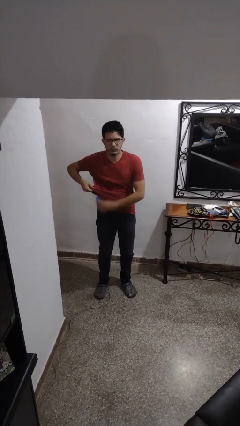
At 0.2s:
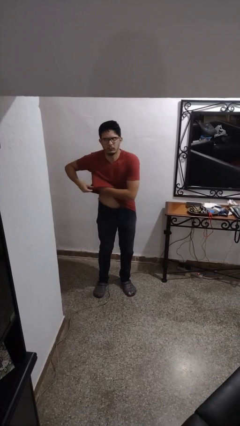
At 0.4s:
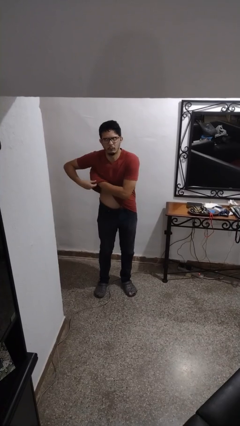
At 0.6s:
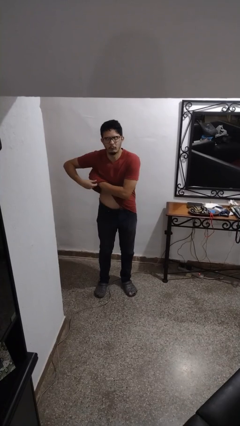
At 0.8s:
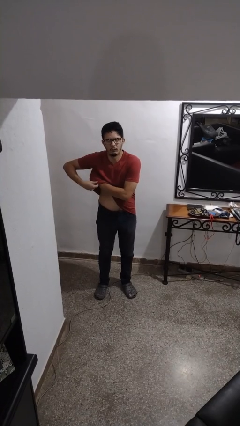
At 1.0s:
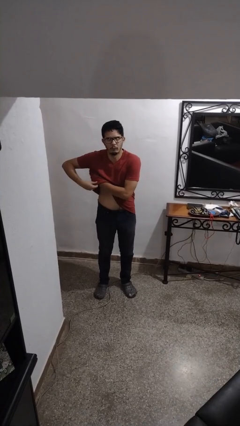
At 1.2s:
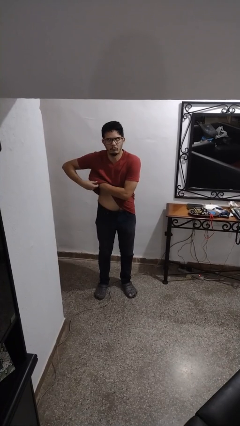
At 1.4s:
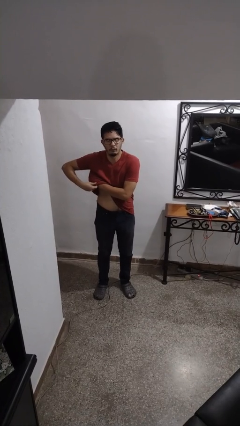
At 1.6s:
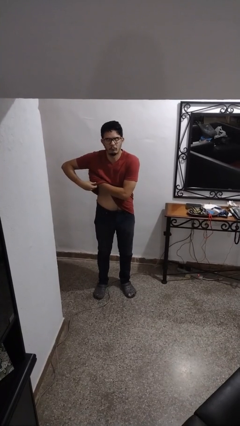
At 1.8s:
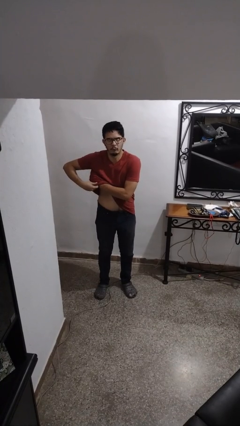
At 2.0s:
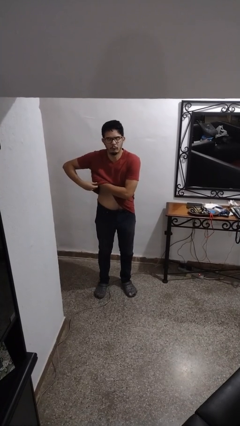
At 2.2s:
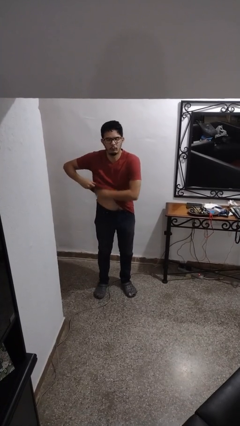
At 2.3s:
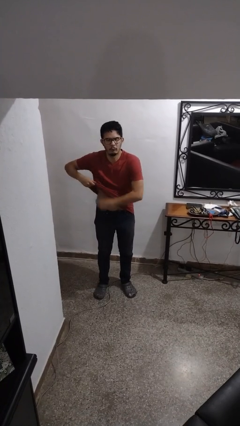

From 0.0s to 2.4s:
person applies deodorant

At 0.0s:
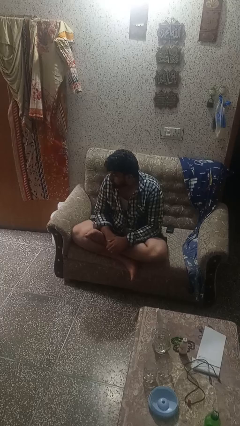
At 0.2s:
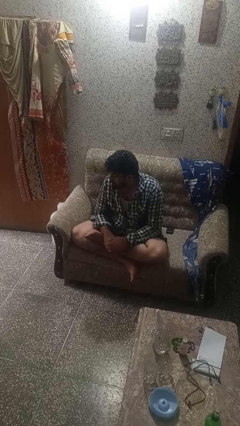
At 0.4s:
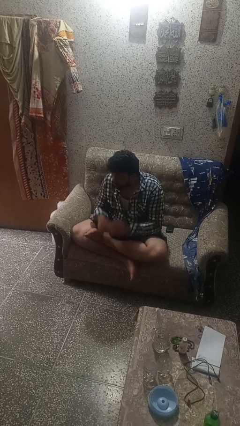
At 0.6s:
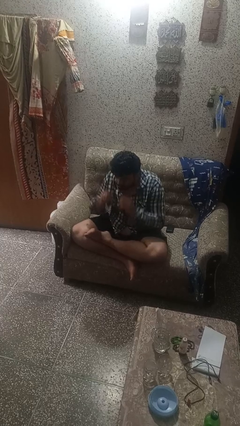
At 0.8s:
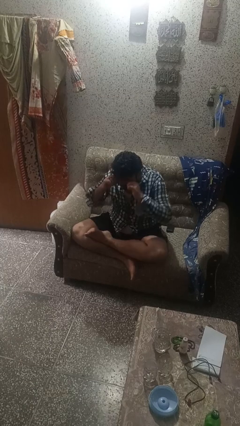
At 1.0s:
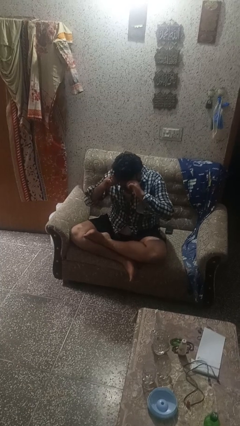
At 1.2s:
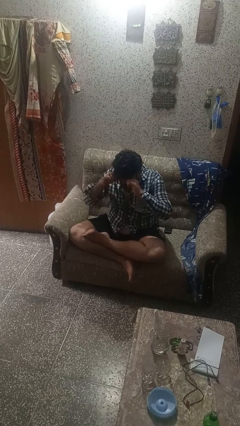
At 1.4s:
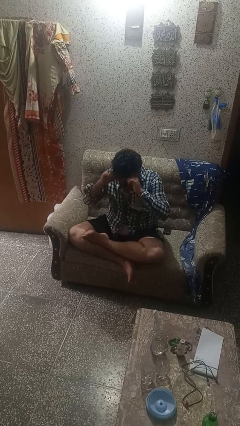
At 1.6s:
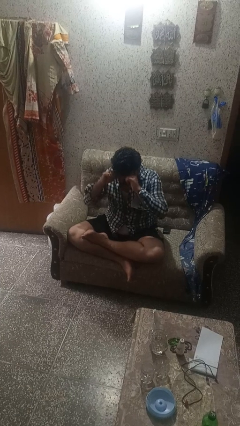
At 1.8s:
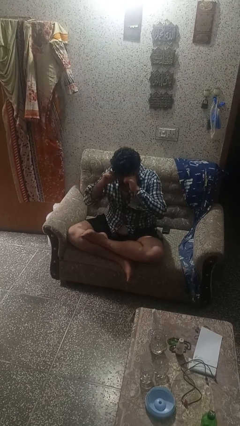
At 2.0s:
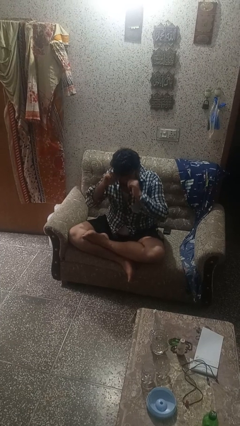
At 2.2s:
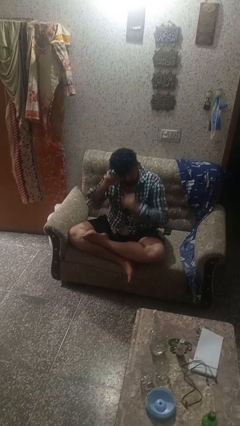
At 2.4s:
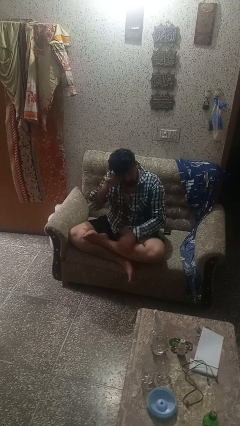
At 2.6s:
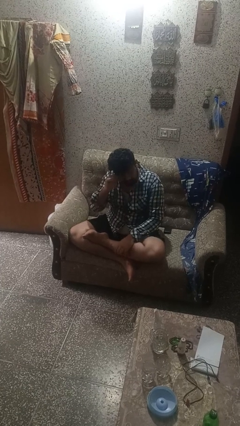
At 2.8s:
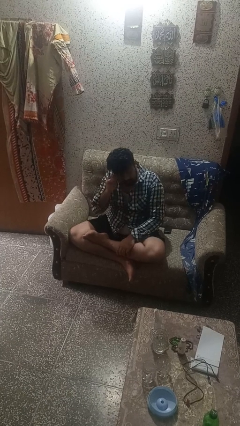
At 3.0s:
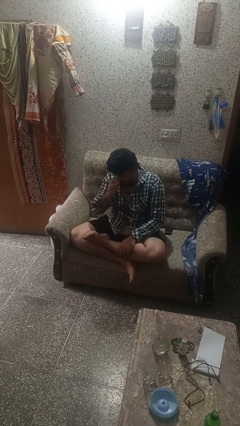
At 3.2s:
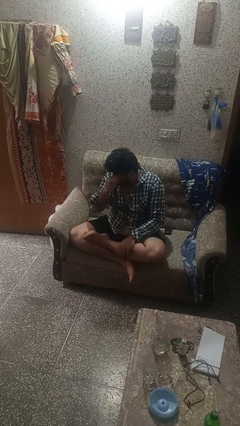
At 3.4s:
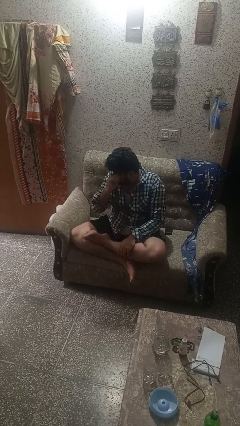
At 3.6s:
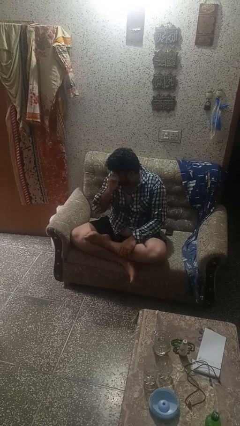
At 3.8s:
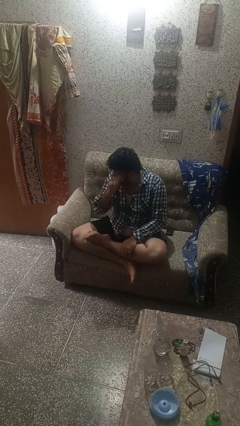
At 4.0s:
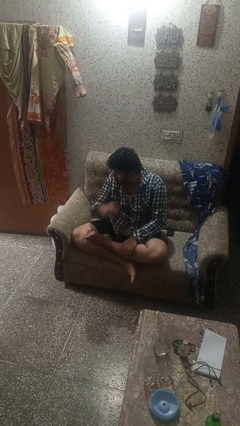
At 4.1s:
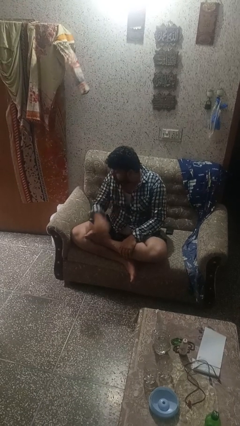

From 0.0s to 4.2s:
person rubs eyes

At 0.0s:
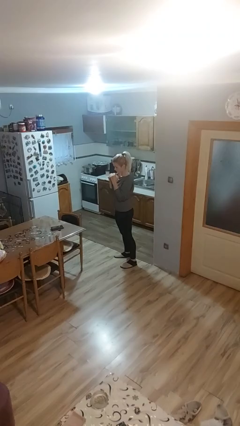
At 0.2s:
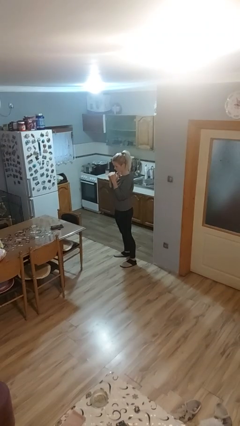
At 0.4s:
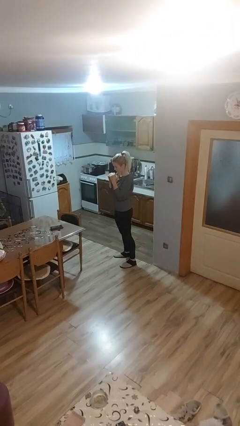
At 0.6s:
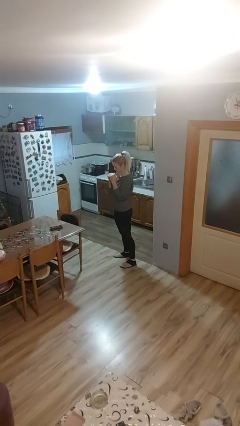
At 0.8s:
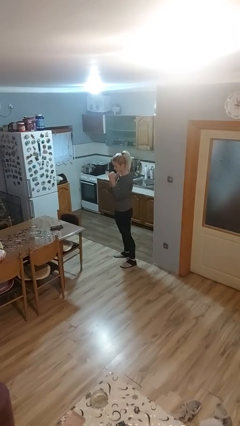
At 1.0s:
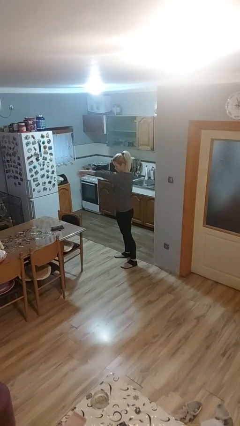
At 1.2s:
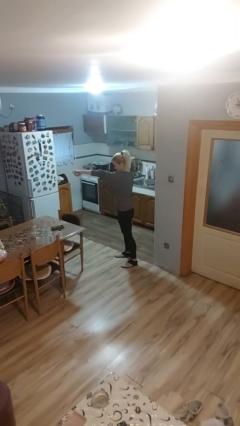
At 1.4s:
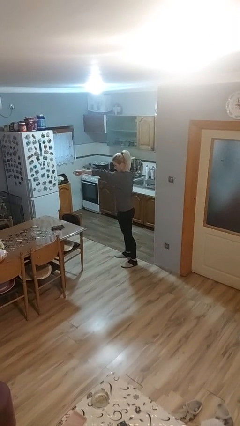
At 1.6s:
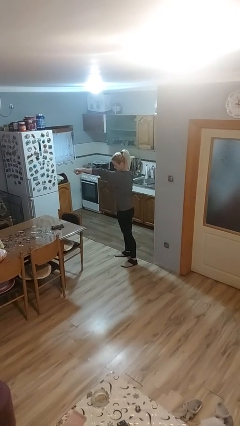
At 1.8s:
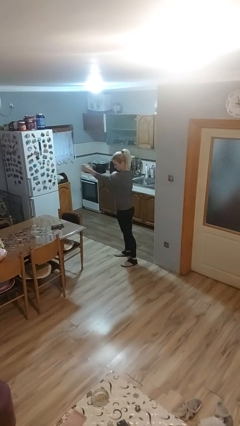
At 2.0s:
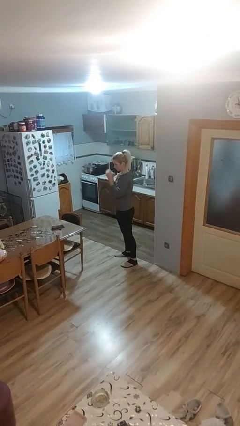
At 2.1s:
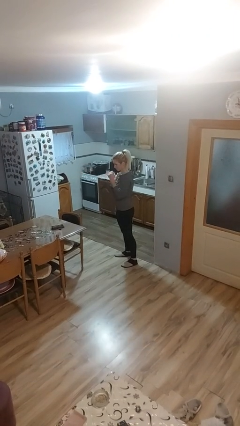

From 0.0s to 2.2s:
person punches

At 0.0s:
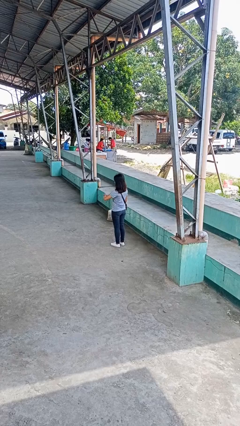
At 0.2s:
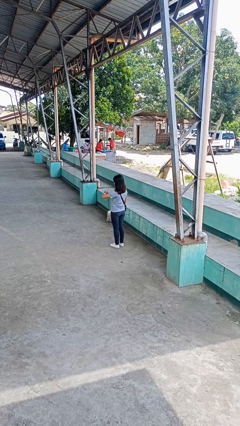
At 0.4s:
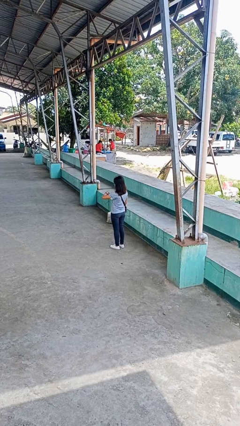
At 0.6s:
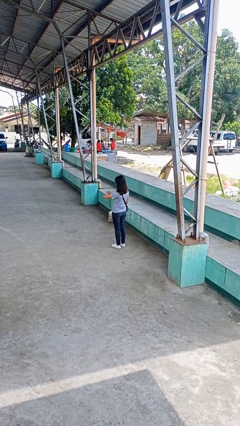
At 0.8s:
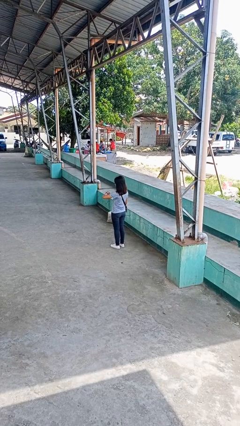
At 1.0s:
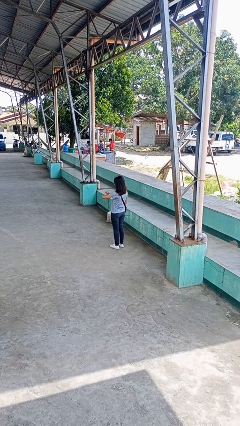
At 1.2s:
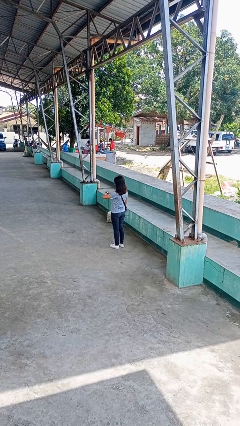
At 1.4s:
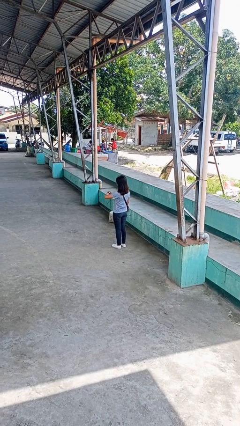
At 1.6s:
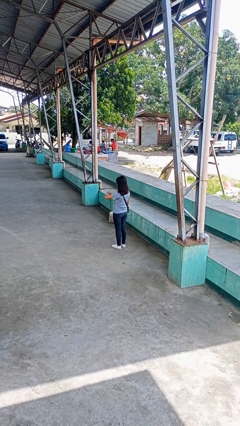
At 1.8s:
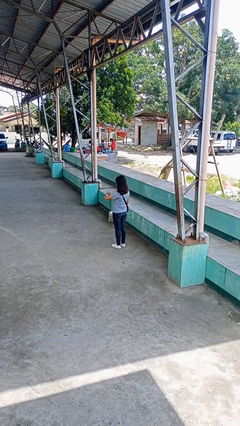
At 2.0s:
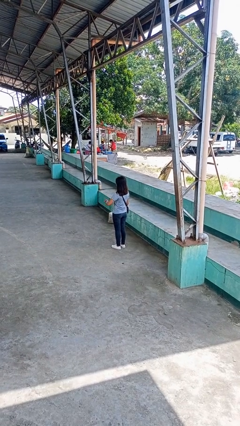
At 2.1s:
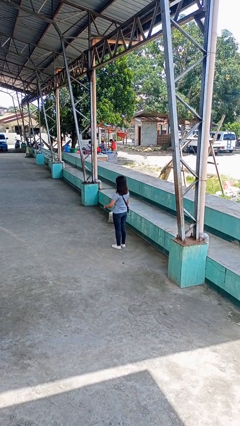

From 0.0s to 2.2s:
person looks at wristwatch

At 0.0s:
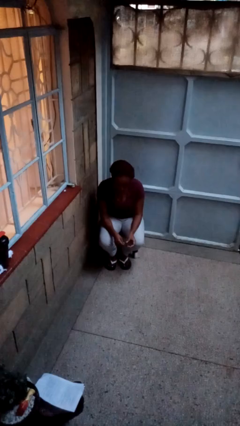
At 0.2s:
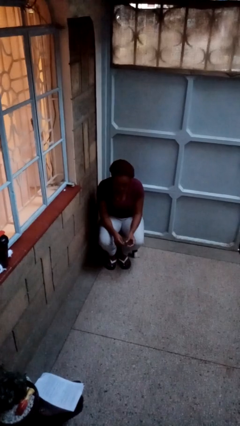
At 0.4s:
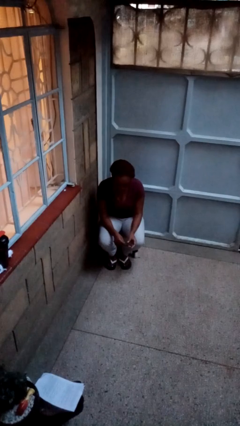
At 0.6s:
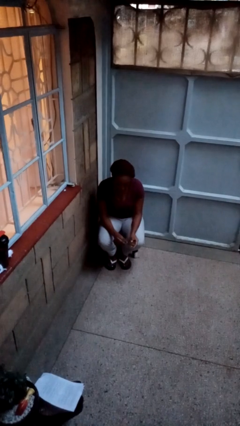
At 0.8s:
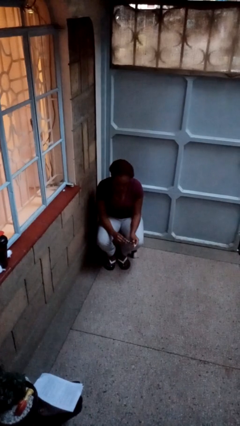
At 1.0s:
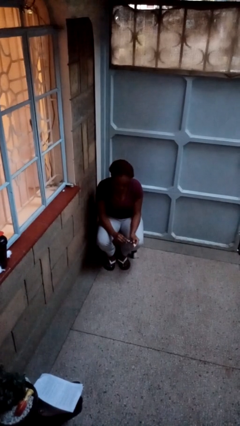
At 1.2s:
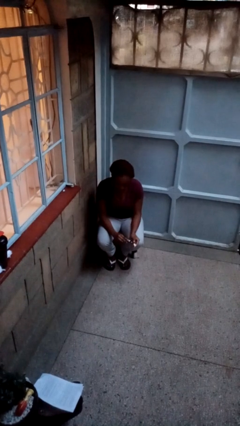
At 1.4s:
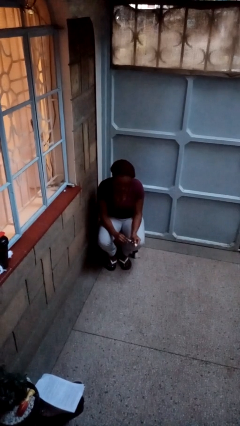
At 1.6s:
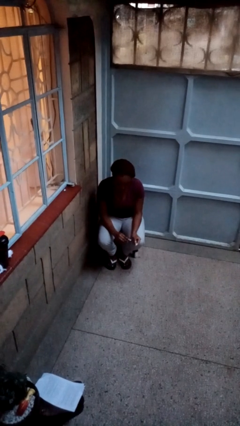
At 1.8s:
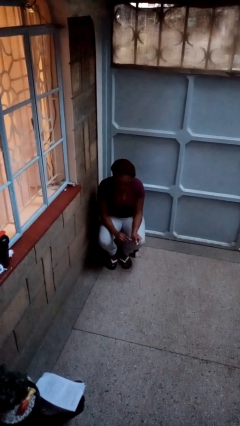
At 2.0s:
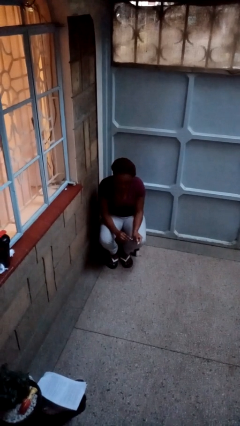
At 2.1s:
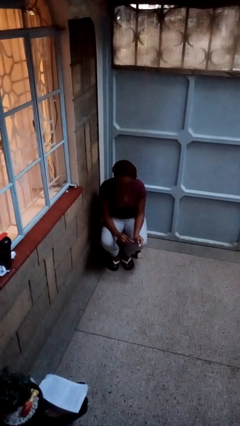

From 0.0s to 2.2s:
person clips fingernails

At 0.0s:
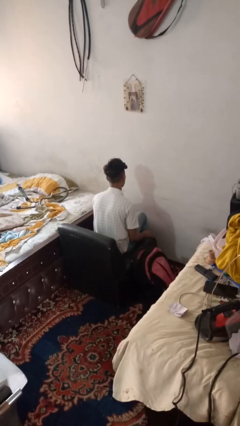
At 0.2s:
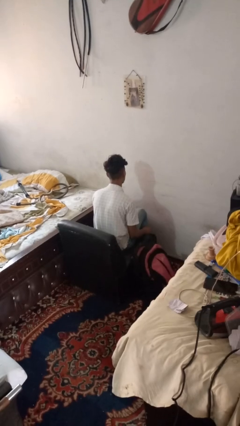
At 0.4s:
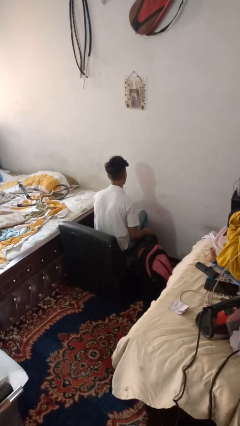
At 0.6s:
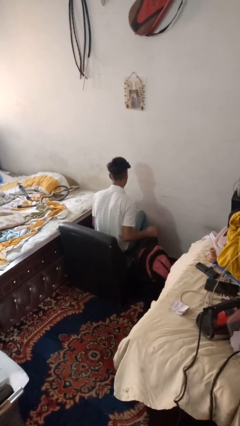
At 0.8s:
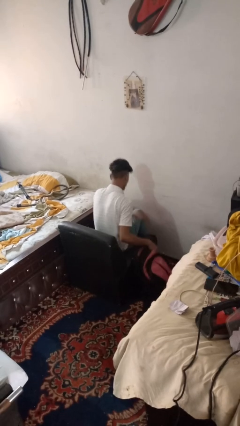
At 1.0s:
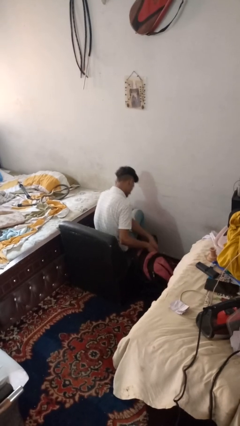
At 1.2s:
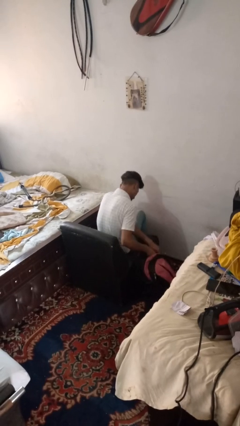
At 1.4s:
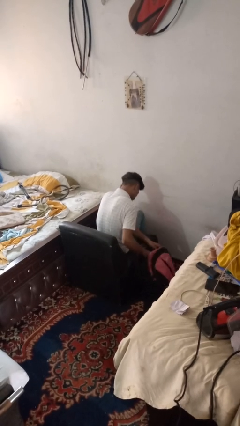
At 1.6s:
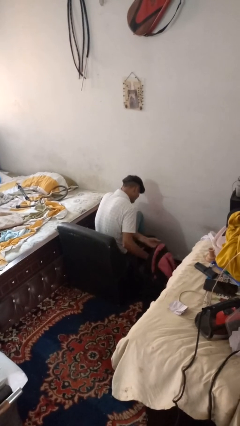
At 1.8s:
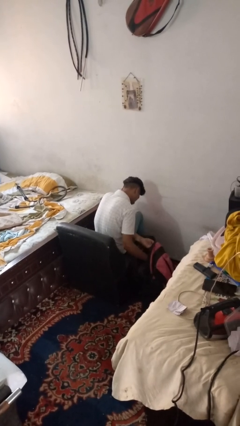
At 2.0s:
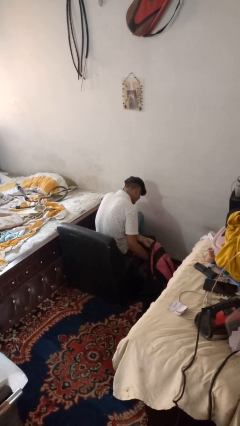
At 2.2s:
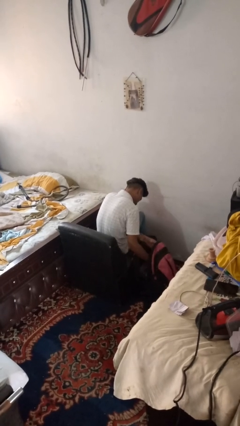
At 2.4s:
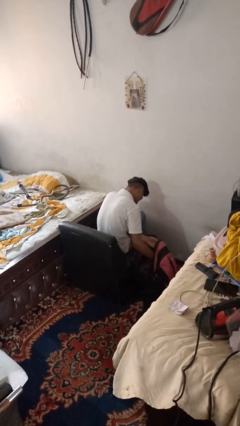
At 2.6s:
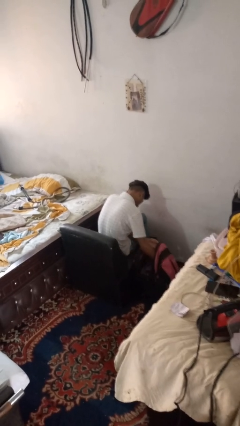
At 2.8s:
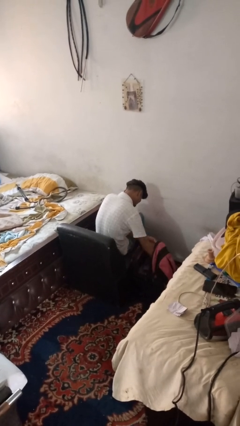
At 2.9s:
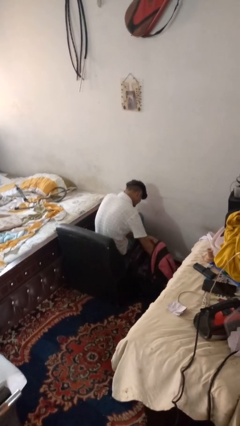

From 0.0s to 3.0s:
person searches in bag

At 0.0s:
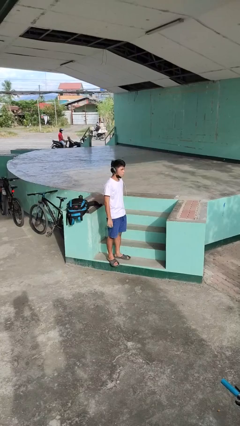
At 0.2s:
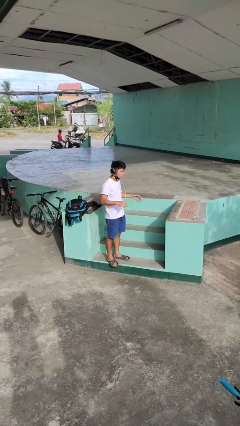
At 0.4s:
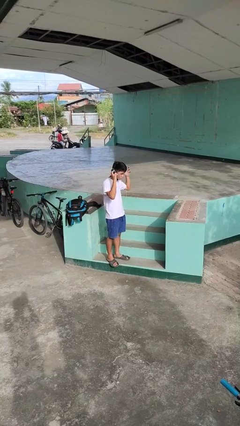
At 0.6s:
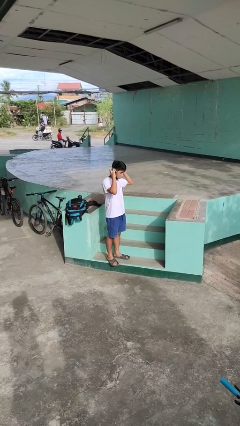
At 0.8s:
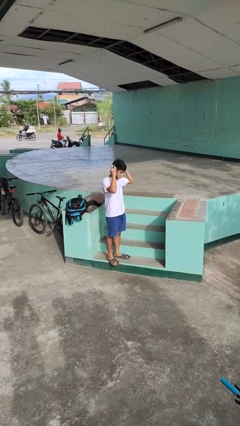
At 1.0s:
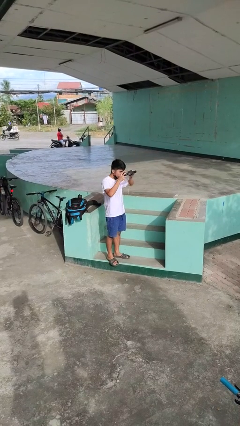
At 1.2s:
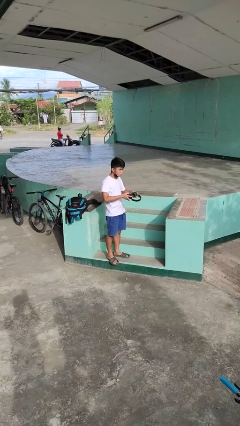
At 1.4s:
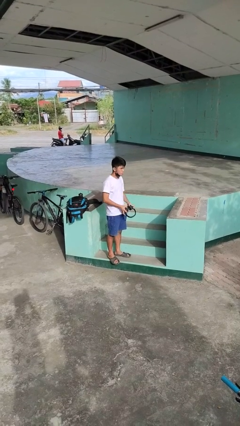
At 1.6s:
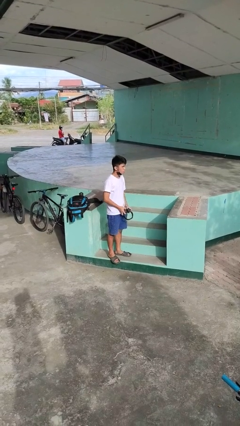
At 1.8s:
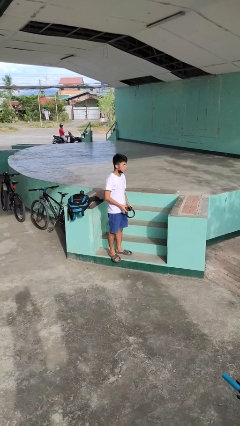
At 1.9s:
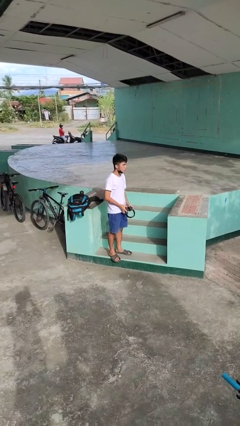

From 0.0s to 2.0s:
person takes off headphones
